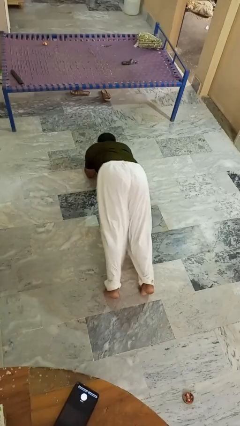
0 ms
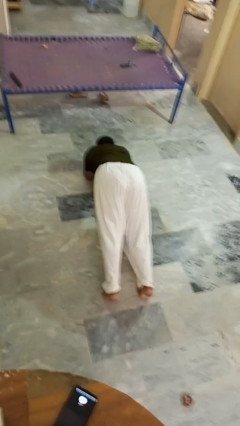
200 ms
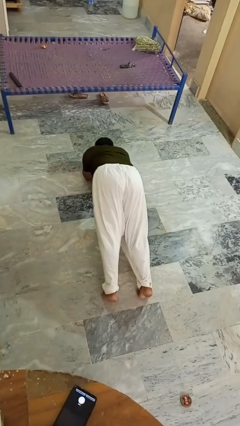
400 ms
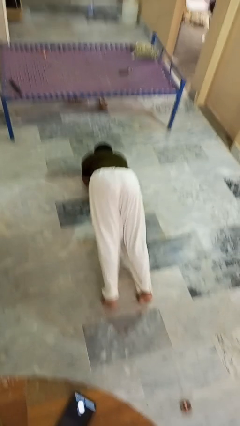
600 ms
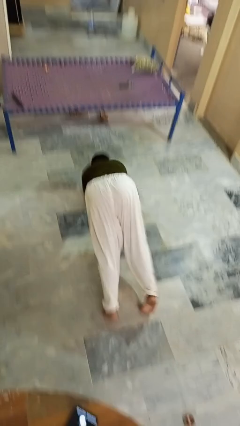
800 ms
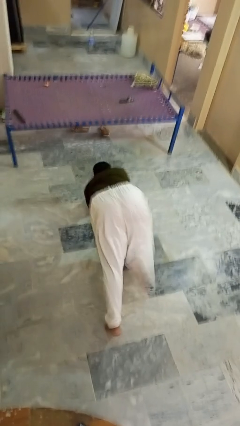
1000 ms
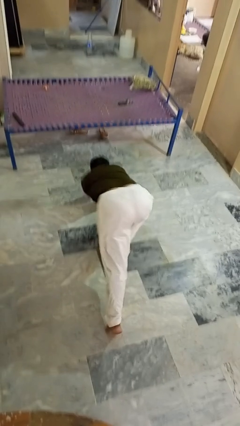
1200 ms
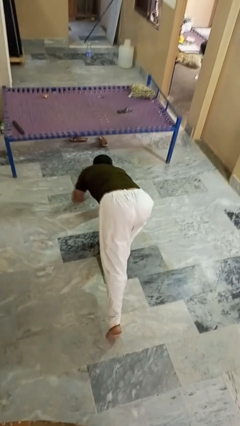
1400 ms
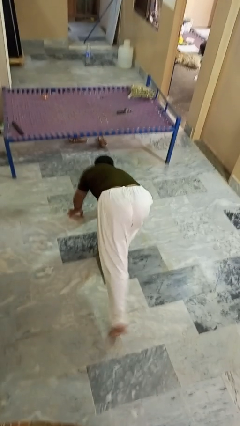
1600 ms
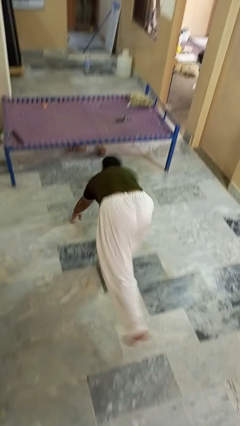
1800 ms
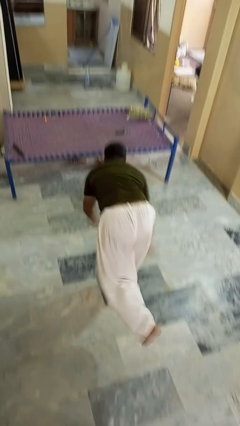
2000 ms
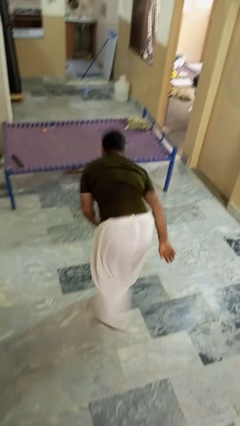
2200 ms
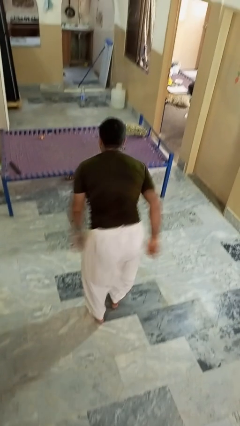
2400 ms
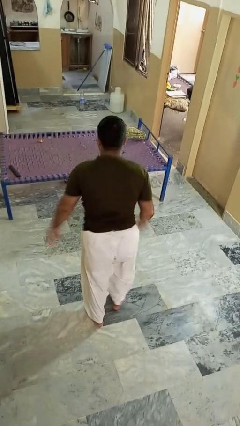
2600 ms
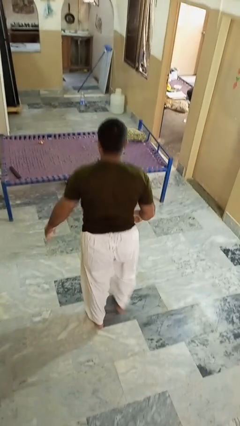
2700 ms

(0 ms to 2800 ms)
person stands up from floor

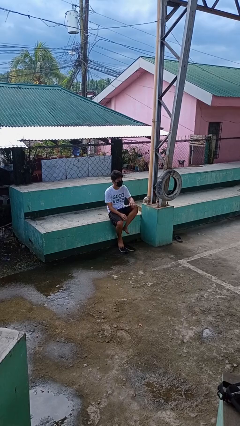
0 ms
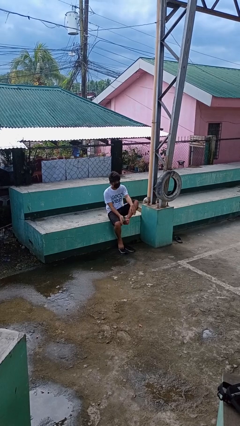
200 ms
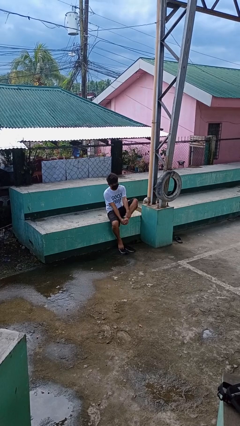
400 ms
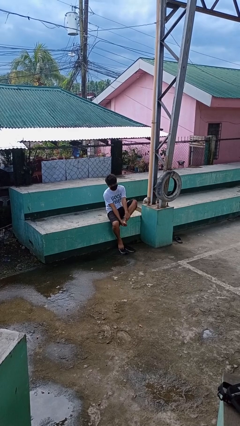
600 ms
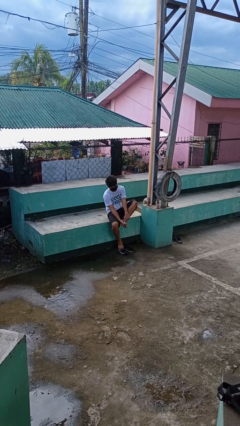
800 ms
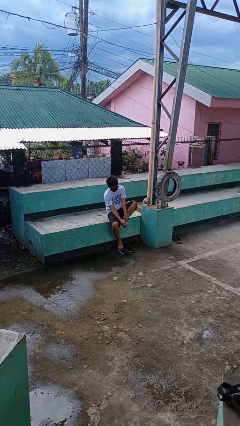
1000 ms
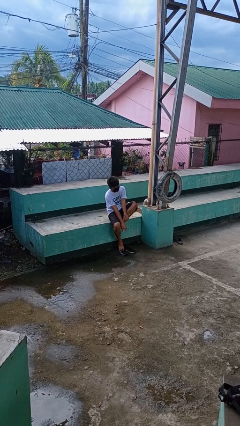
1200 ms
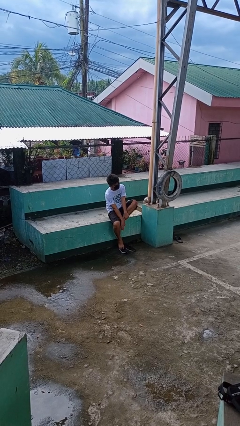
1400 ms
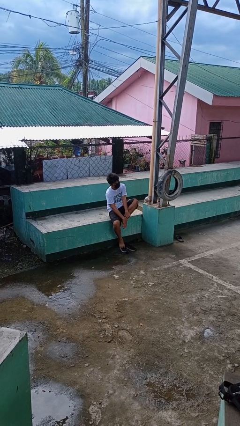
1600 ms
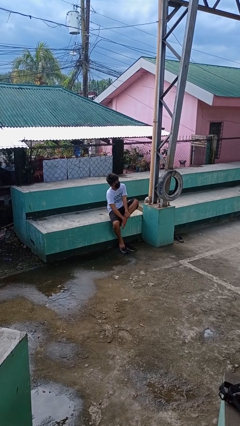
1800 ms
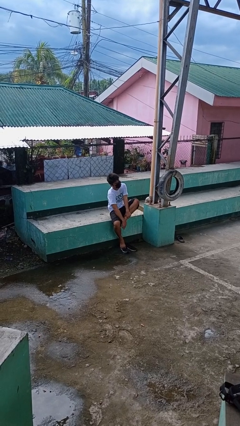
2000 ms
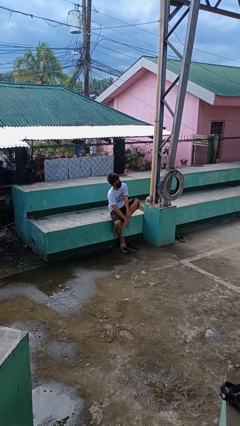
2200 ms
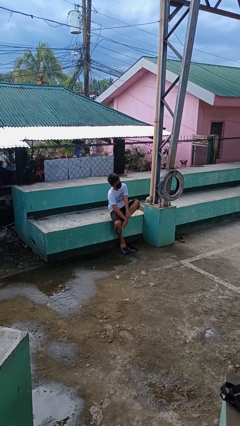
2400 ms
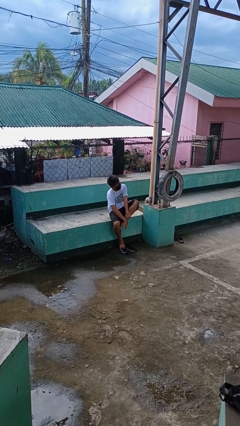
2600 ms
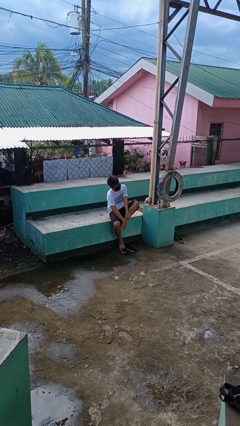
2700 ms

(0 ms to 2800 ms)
person rubs foot

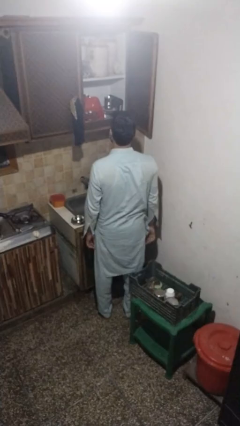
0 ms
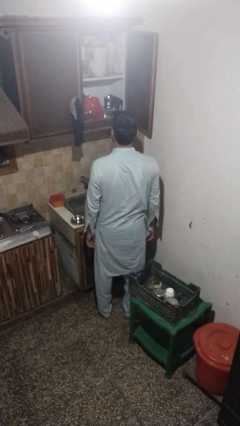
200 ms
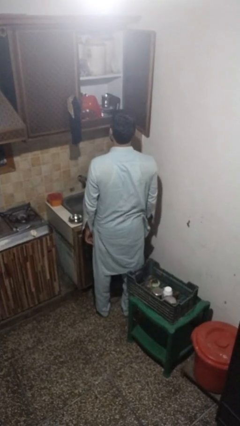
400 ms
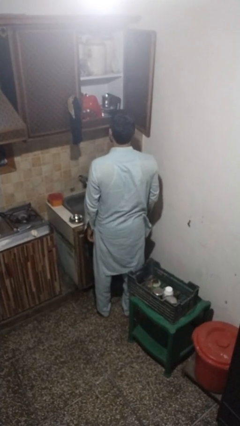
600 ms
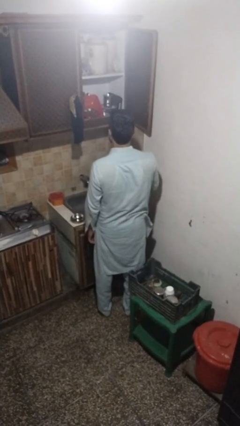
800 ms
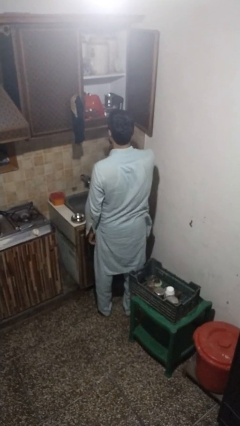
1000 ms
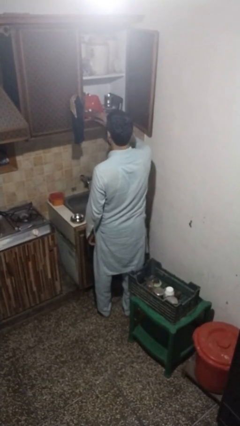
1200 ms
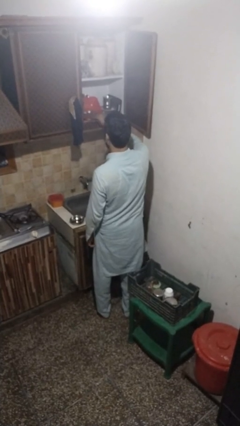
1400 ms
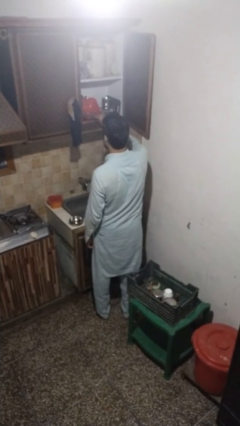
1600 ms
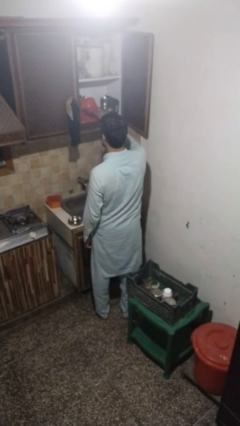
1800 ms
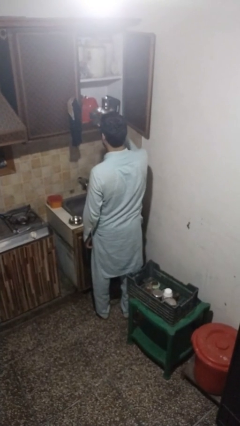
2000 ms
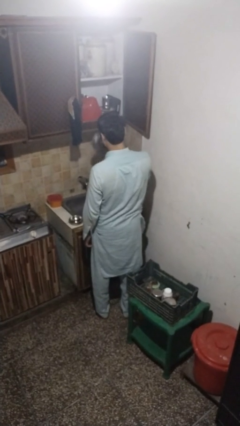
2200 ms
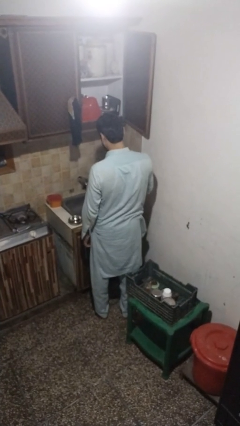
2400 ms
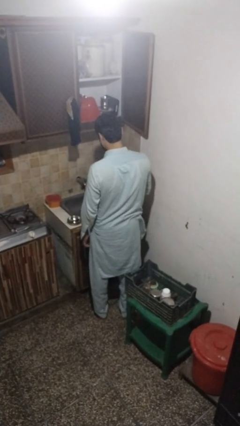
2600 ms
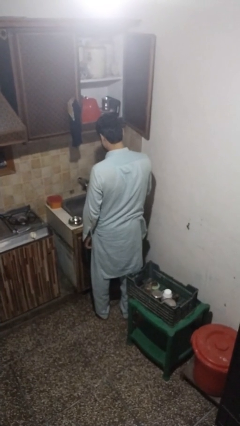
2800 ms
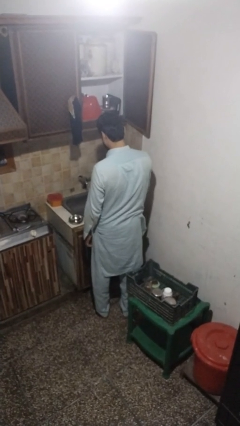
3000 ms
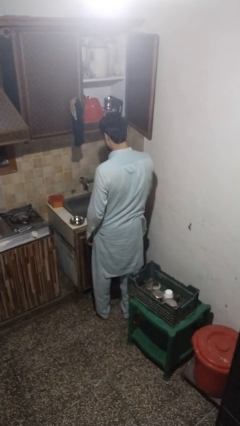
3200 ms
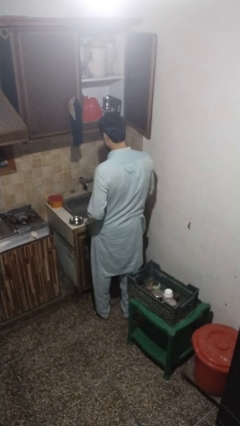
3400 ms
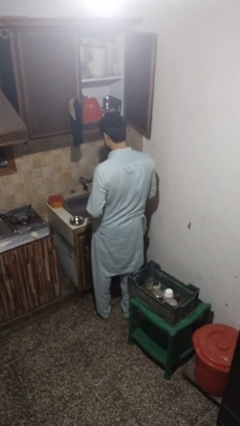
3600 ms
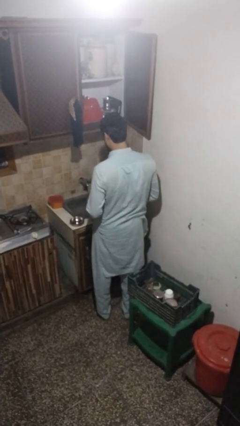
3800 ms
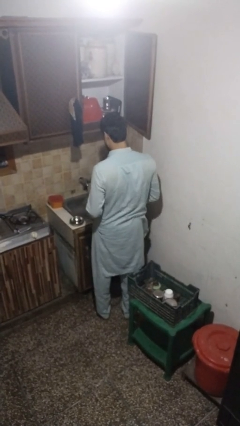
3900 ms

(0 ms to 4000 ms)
person takes object from cabinet

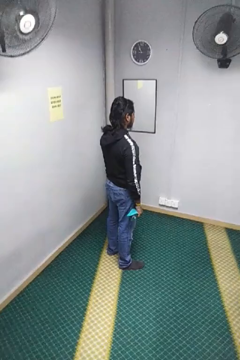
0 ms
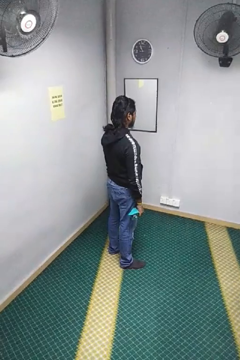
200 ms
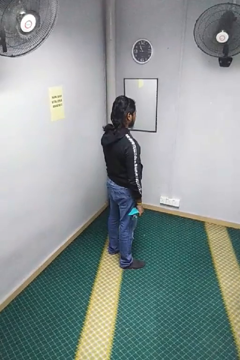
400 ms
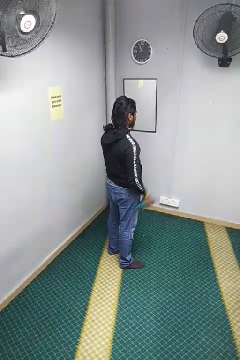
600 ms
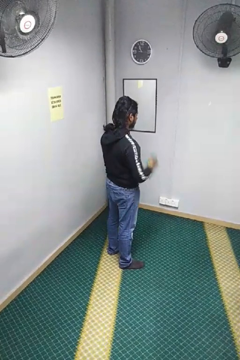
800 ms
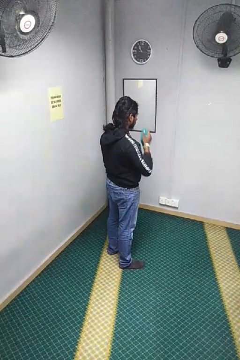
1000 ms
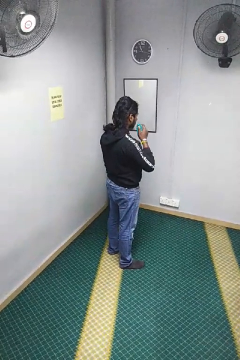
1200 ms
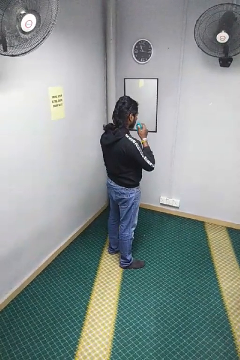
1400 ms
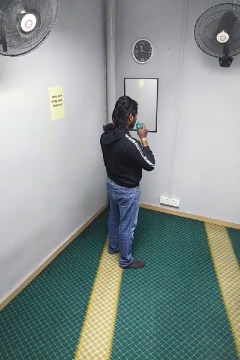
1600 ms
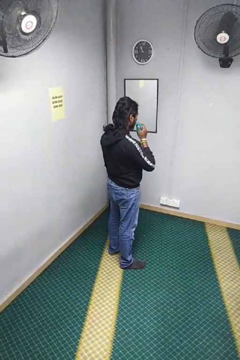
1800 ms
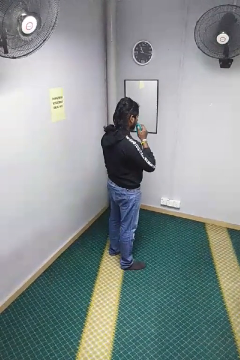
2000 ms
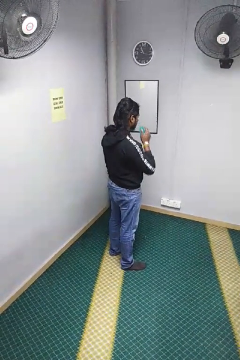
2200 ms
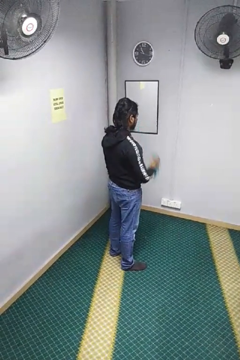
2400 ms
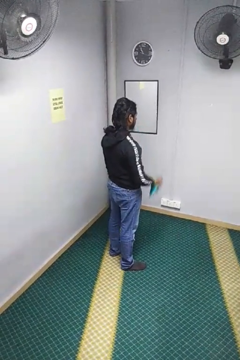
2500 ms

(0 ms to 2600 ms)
person wipes mouth with napkin

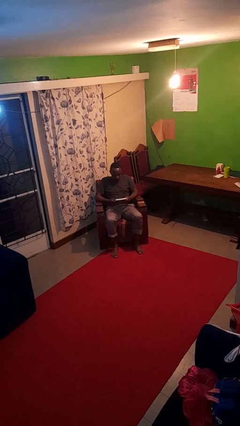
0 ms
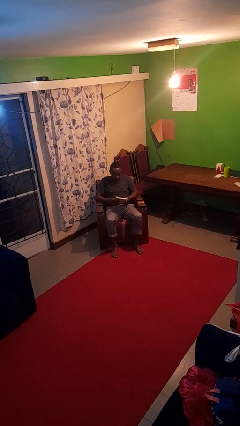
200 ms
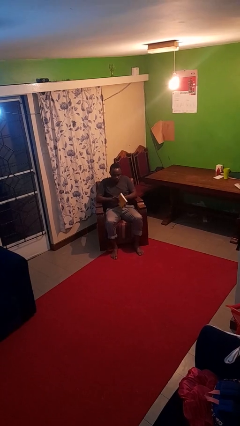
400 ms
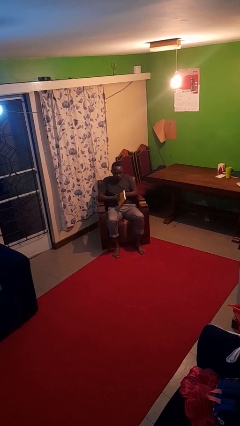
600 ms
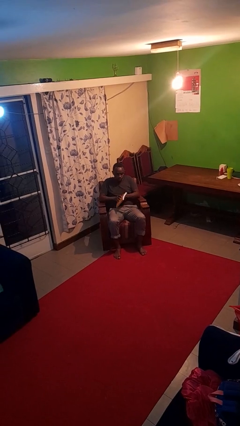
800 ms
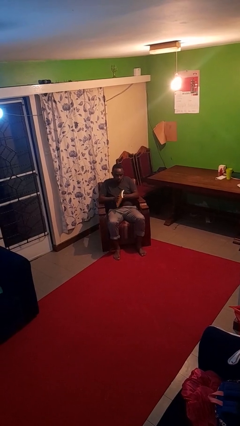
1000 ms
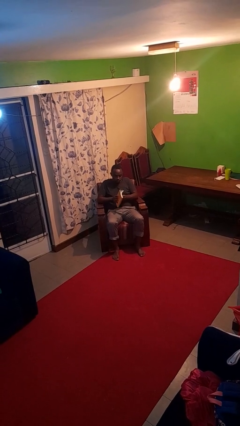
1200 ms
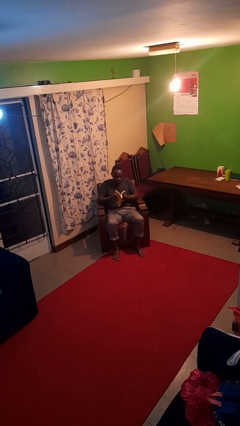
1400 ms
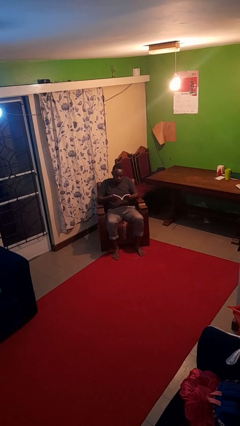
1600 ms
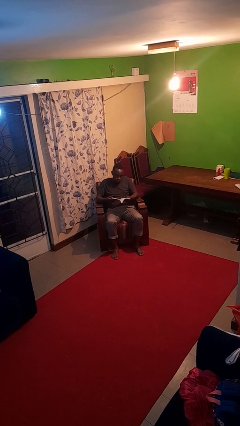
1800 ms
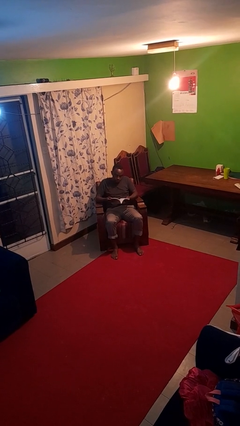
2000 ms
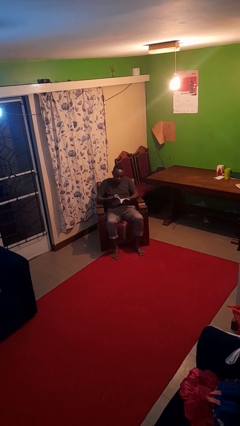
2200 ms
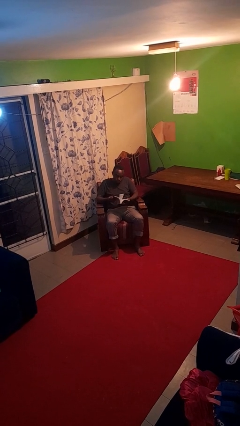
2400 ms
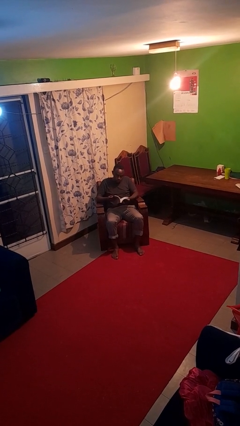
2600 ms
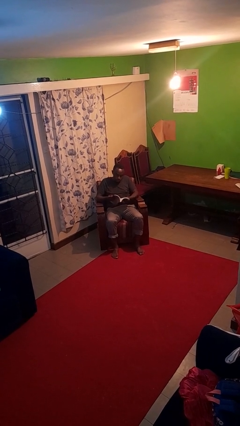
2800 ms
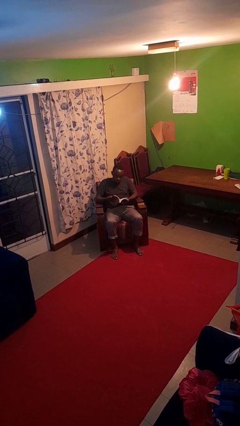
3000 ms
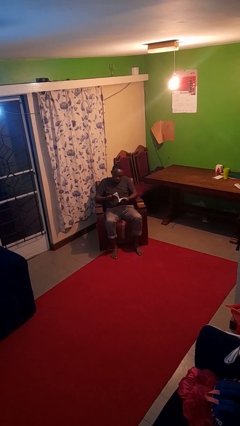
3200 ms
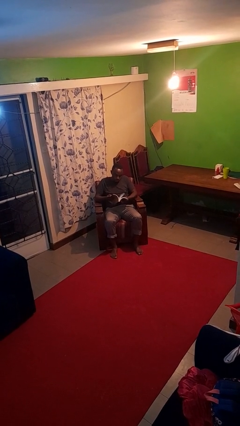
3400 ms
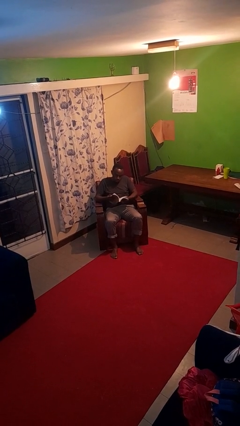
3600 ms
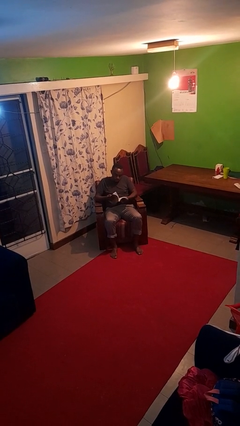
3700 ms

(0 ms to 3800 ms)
person reads book

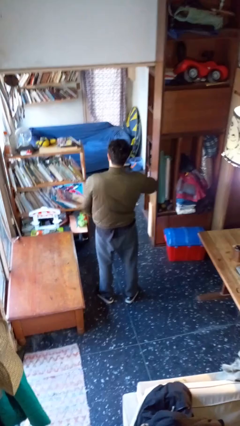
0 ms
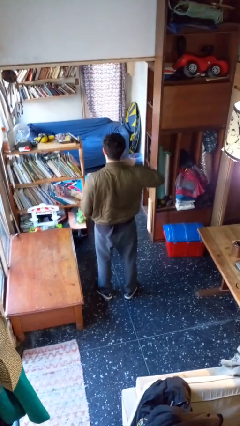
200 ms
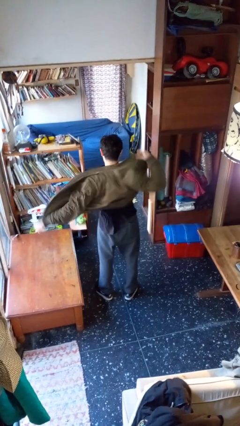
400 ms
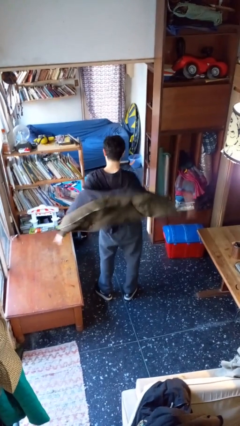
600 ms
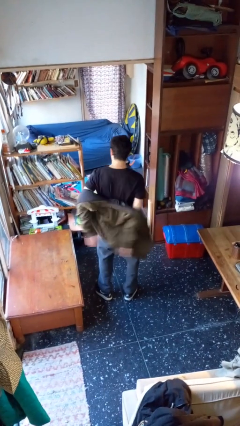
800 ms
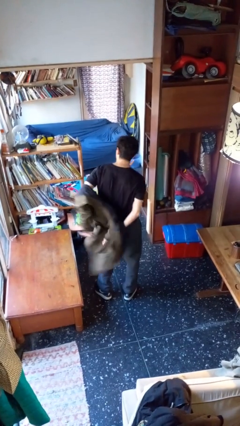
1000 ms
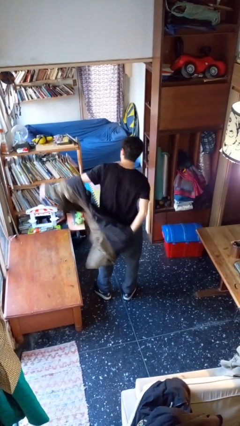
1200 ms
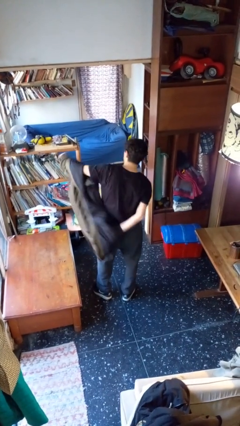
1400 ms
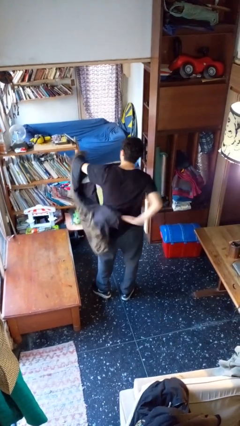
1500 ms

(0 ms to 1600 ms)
person takes off jacket
